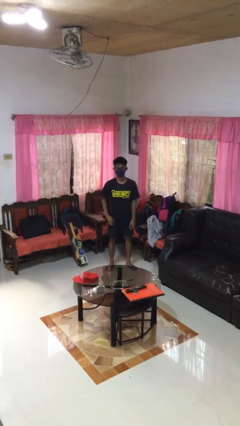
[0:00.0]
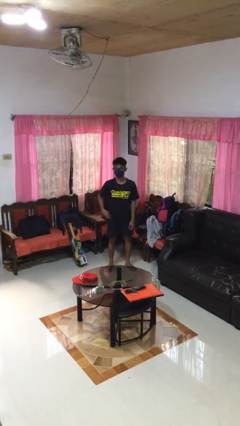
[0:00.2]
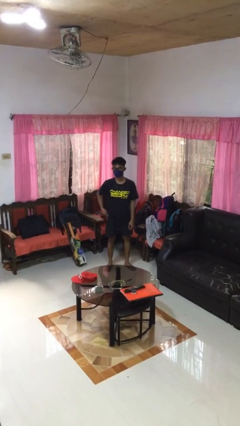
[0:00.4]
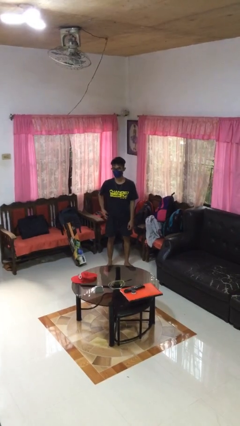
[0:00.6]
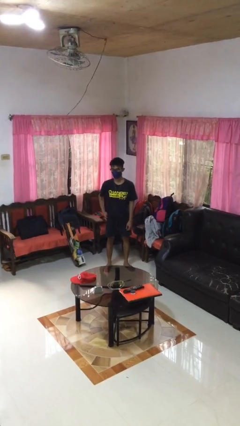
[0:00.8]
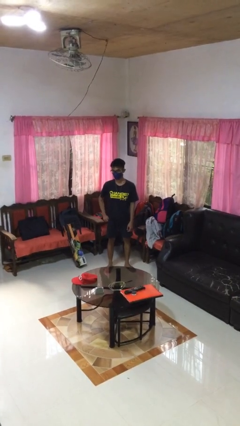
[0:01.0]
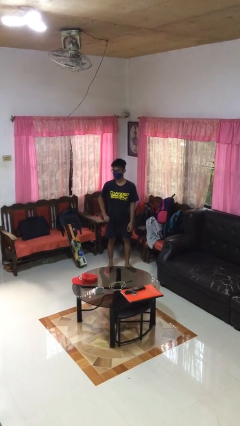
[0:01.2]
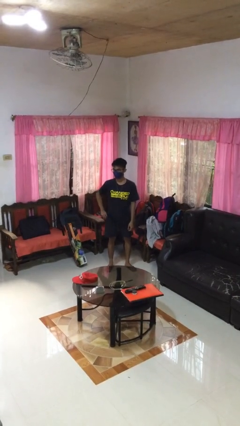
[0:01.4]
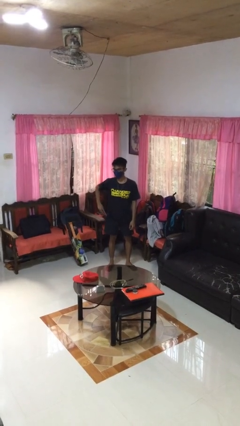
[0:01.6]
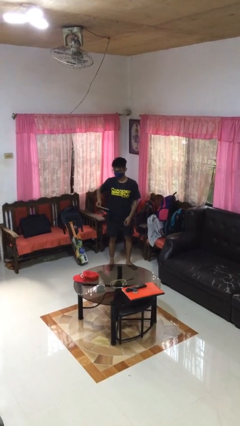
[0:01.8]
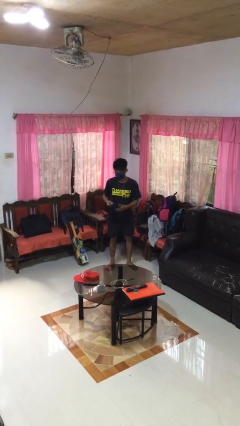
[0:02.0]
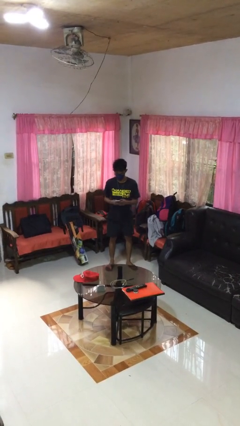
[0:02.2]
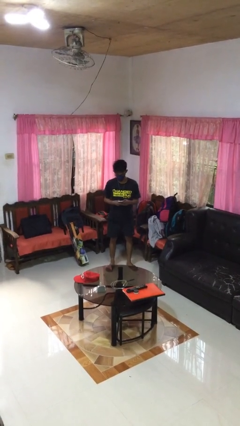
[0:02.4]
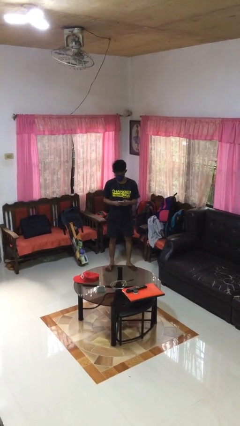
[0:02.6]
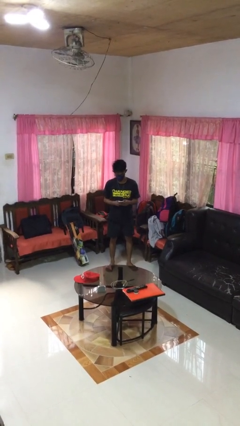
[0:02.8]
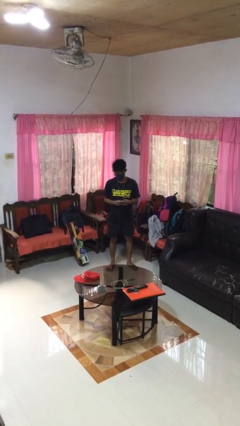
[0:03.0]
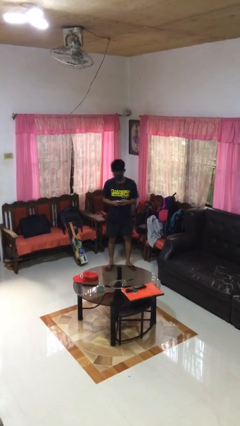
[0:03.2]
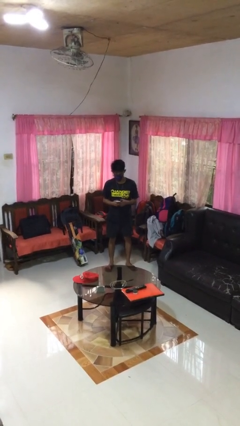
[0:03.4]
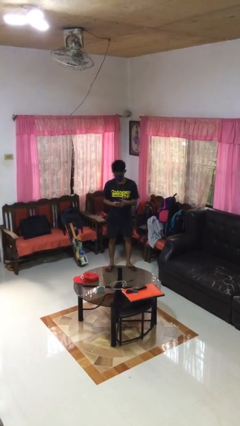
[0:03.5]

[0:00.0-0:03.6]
person takes phone from pocket

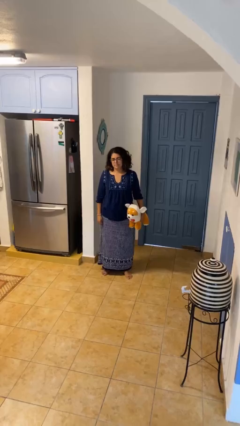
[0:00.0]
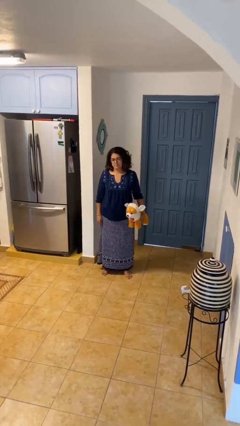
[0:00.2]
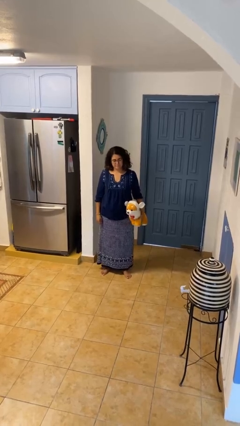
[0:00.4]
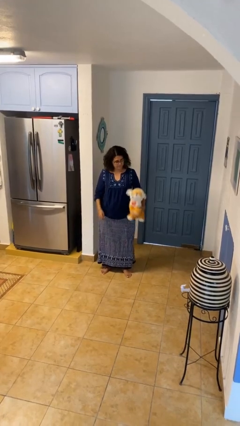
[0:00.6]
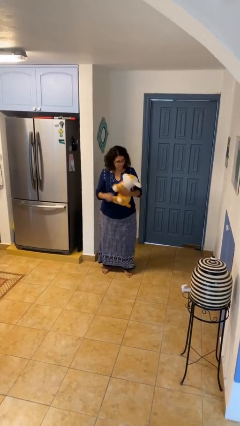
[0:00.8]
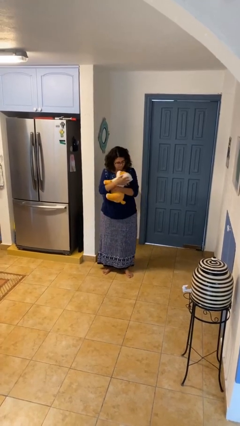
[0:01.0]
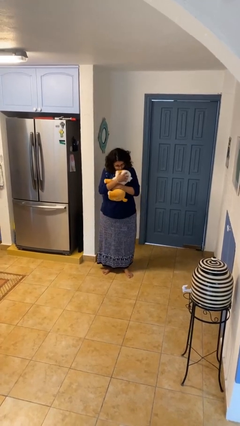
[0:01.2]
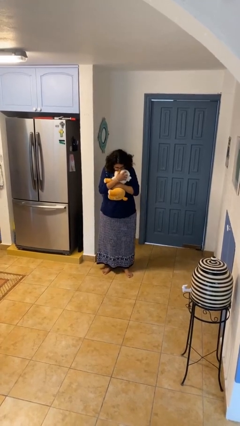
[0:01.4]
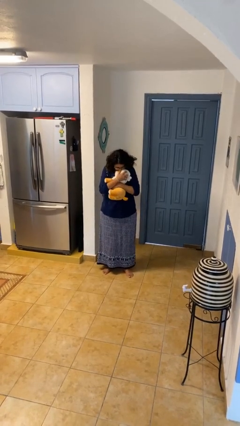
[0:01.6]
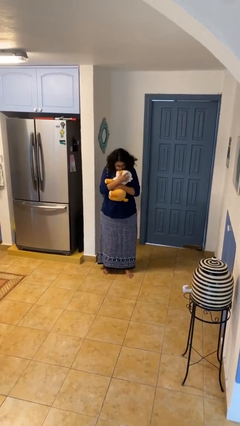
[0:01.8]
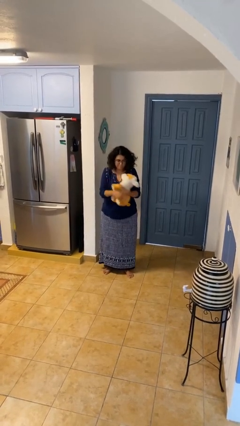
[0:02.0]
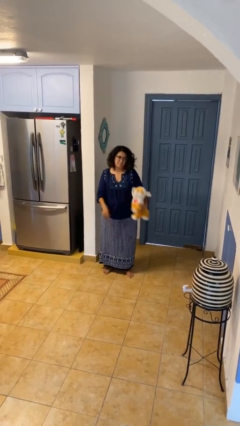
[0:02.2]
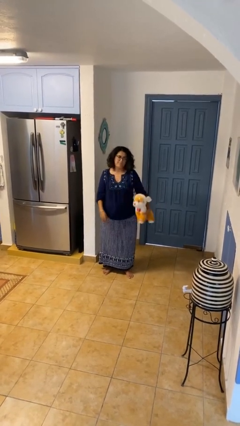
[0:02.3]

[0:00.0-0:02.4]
person hugs stuffed animal

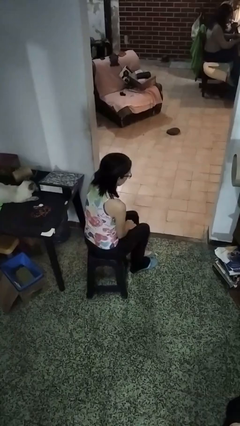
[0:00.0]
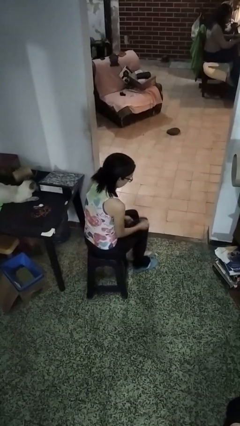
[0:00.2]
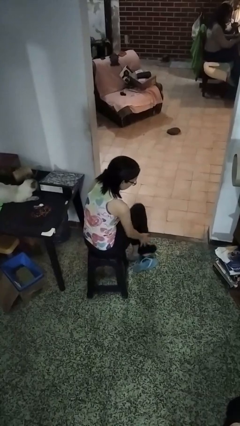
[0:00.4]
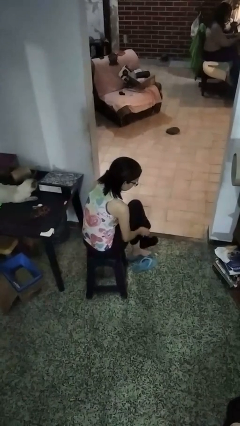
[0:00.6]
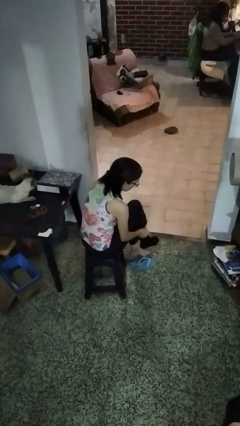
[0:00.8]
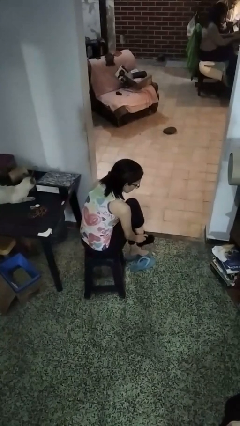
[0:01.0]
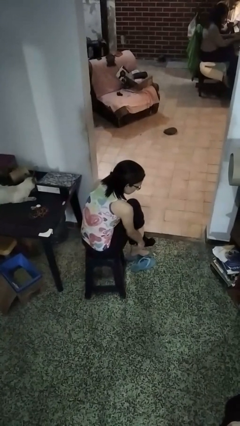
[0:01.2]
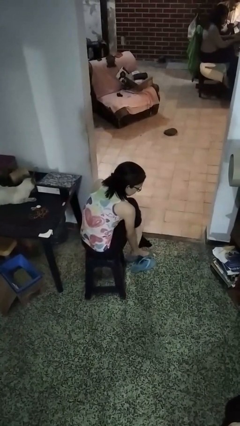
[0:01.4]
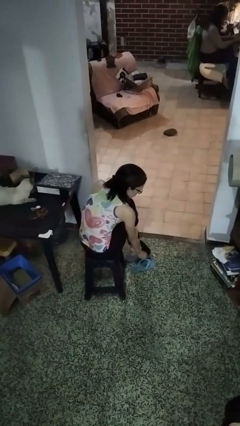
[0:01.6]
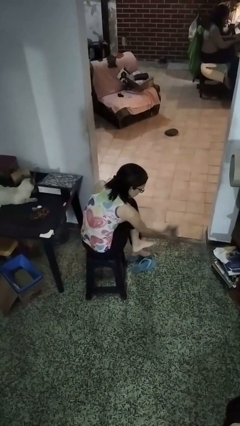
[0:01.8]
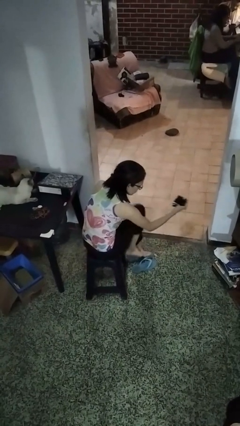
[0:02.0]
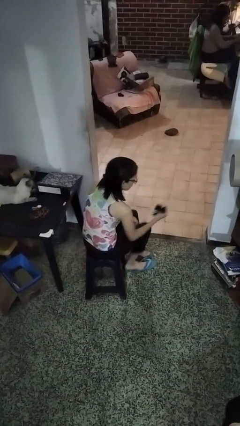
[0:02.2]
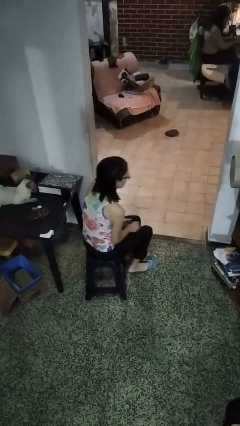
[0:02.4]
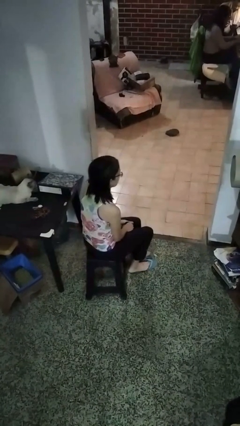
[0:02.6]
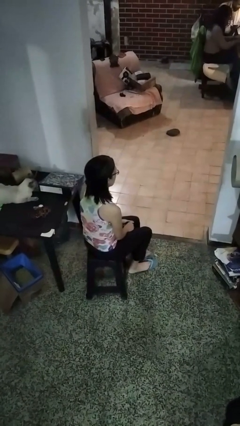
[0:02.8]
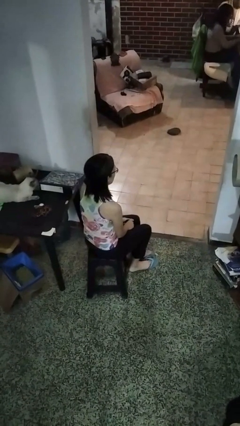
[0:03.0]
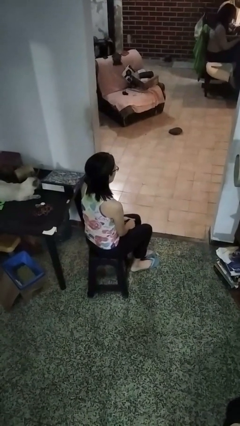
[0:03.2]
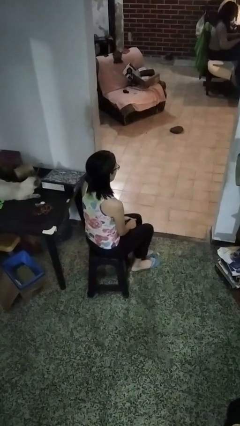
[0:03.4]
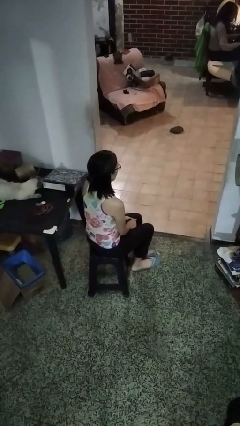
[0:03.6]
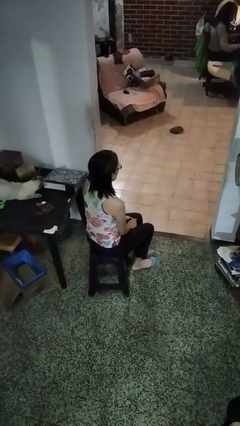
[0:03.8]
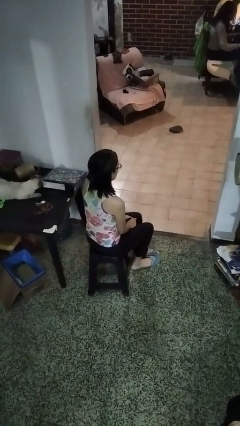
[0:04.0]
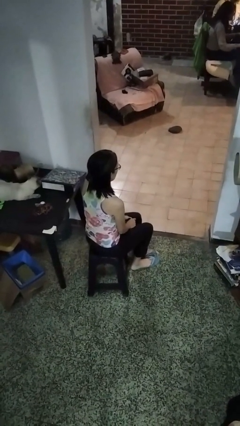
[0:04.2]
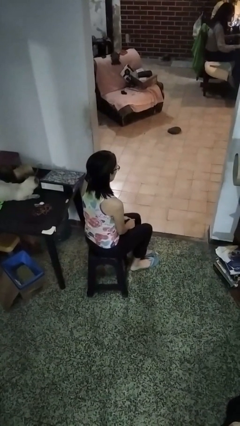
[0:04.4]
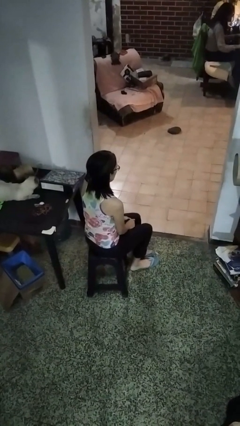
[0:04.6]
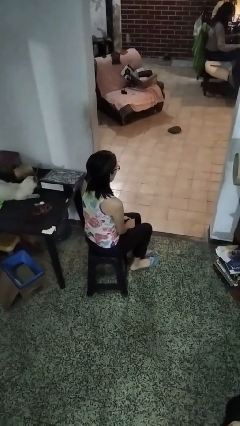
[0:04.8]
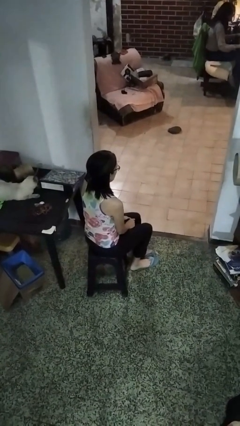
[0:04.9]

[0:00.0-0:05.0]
person takes off socks

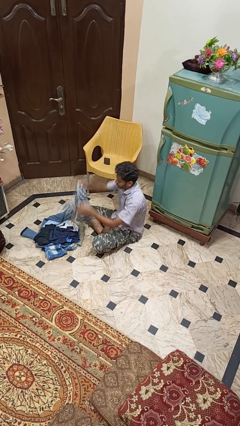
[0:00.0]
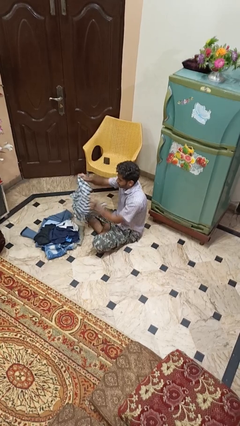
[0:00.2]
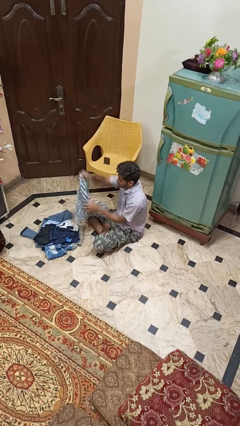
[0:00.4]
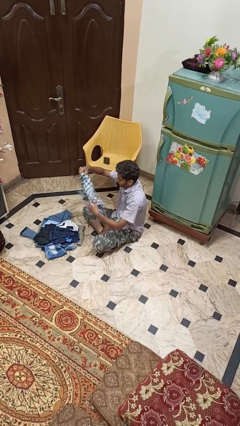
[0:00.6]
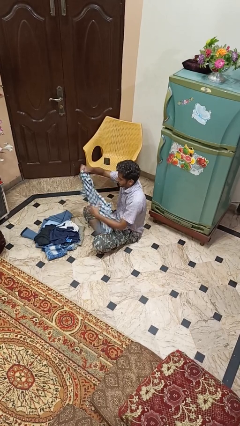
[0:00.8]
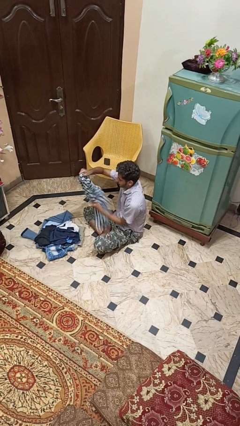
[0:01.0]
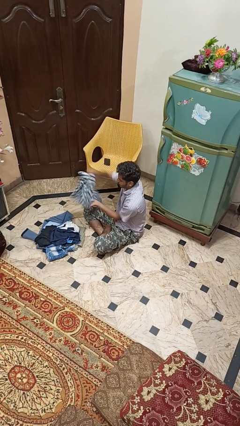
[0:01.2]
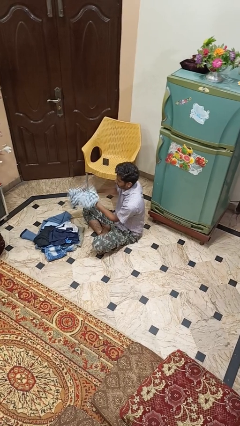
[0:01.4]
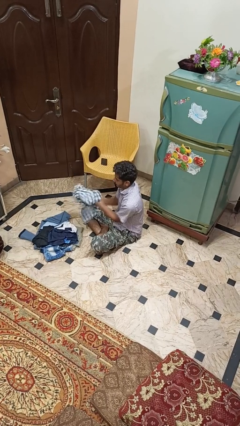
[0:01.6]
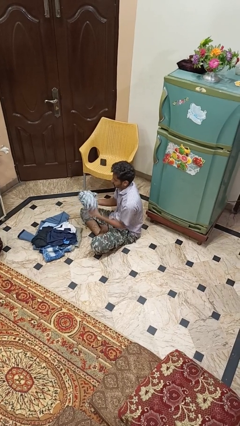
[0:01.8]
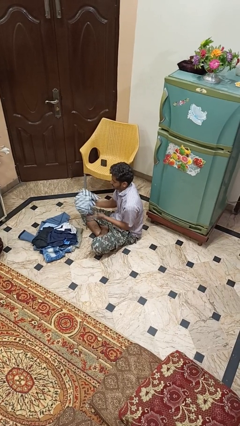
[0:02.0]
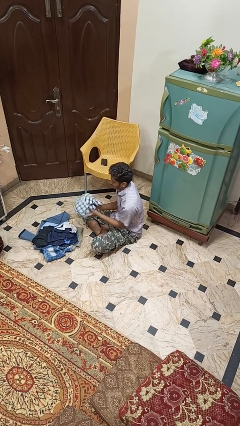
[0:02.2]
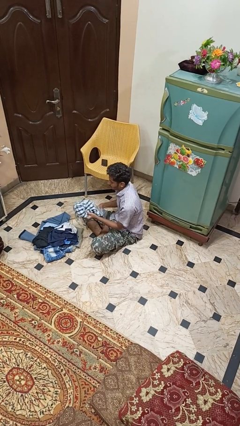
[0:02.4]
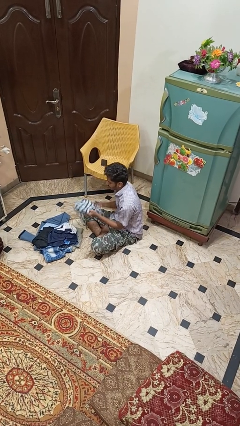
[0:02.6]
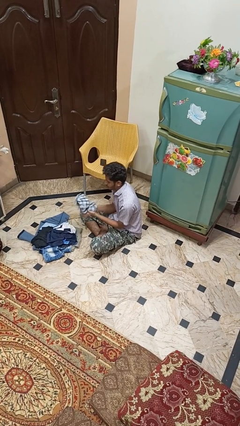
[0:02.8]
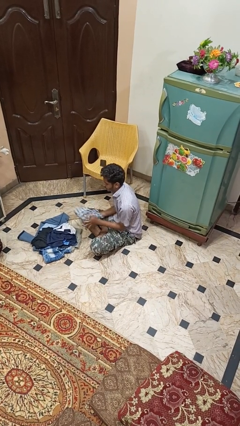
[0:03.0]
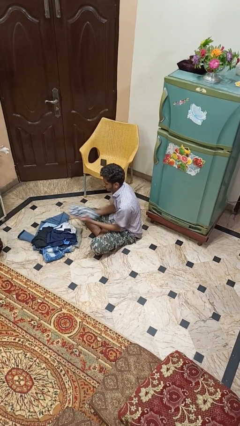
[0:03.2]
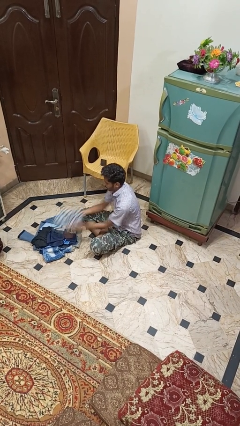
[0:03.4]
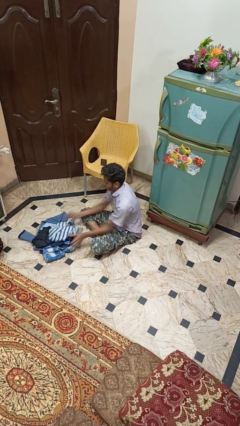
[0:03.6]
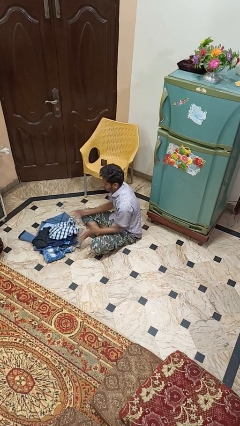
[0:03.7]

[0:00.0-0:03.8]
person folds shirt

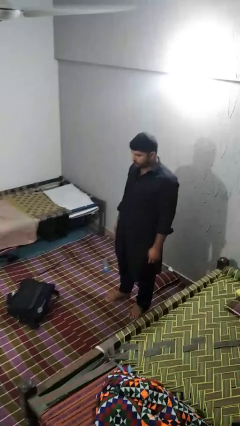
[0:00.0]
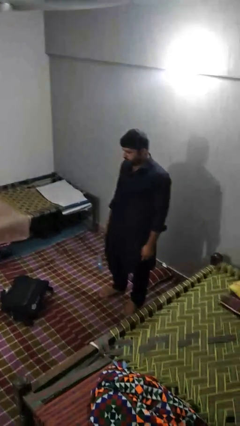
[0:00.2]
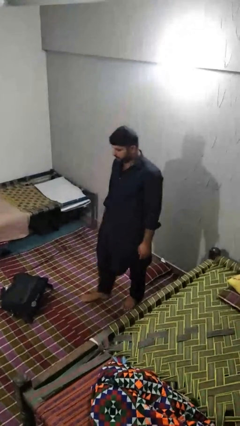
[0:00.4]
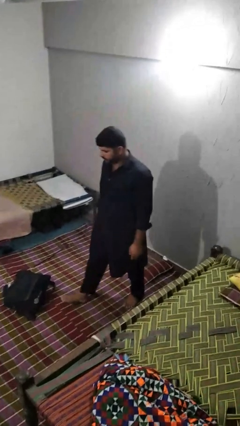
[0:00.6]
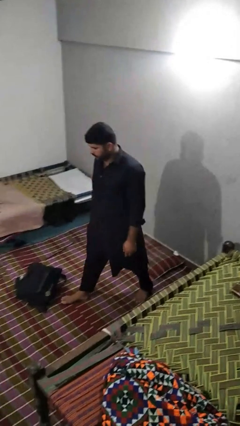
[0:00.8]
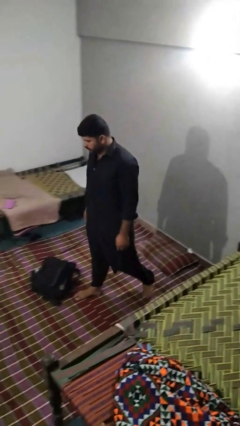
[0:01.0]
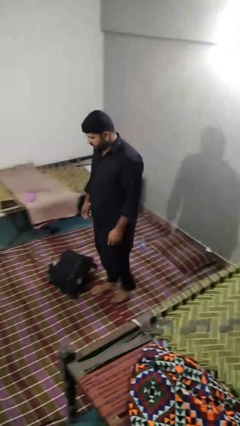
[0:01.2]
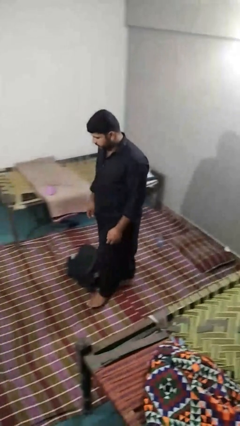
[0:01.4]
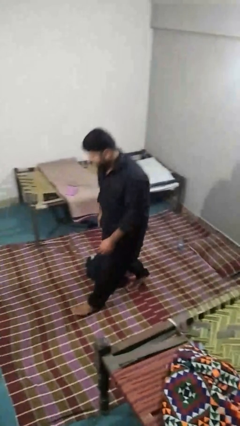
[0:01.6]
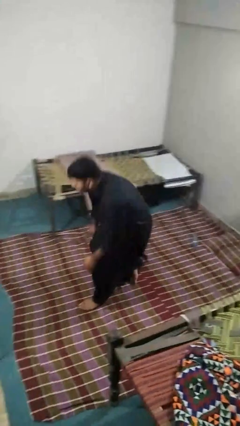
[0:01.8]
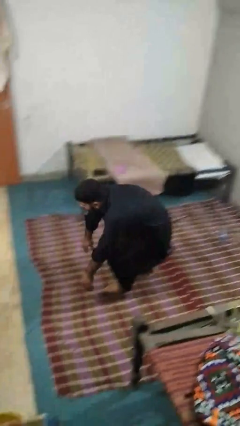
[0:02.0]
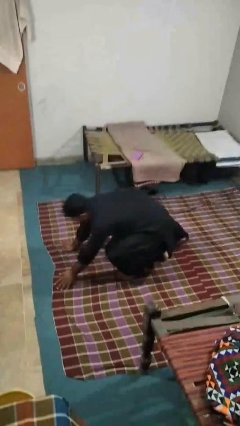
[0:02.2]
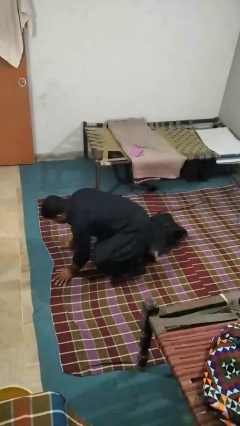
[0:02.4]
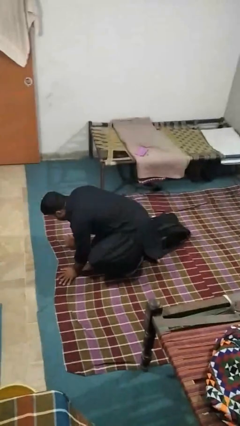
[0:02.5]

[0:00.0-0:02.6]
person trips on object on floor

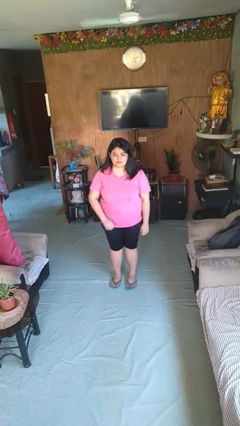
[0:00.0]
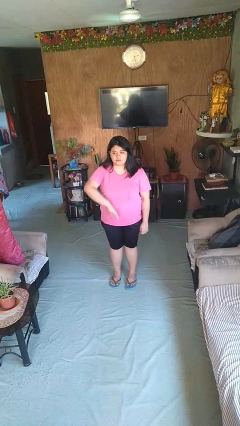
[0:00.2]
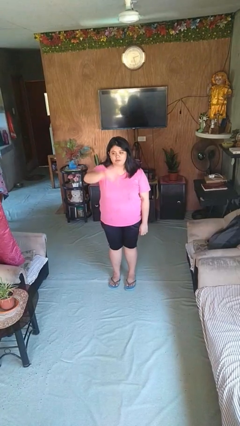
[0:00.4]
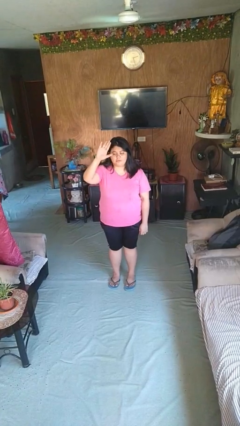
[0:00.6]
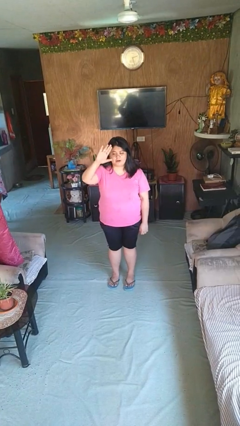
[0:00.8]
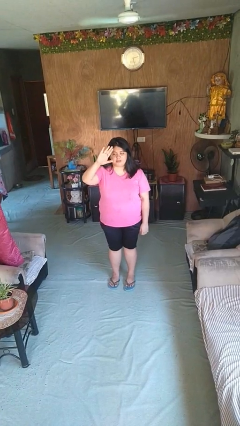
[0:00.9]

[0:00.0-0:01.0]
person gestures swipe up
